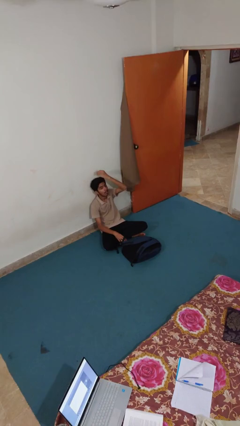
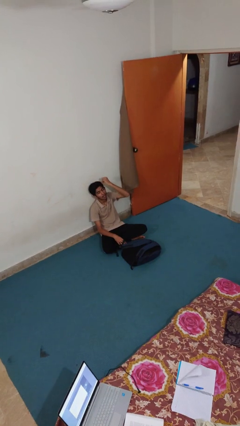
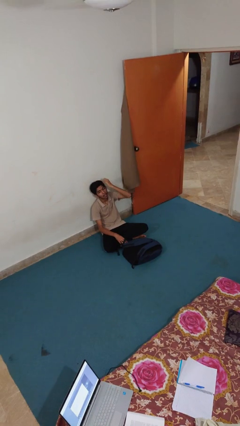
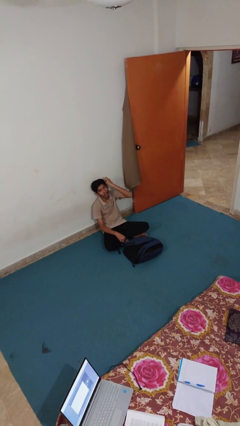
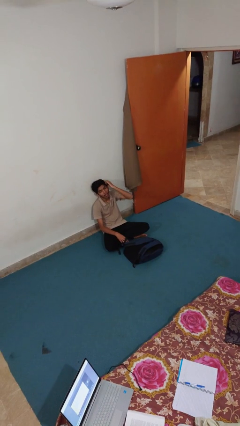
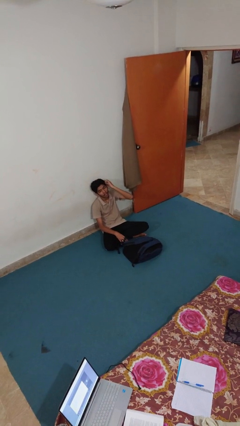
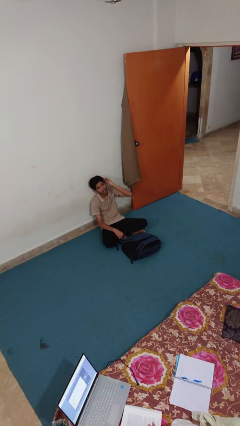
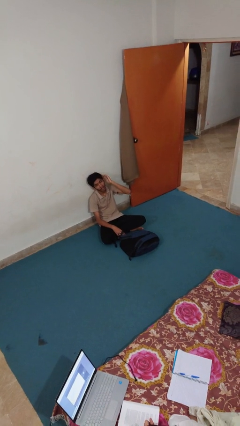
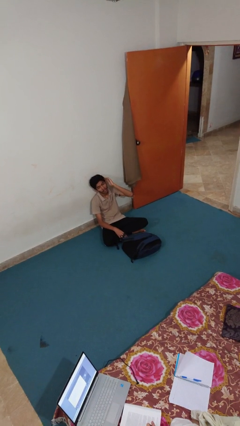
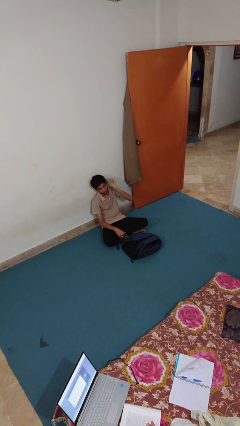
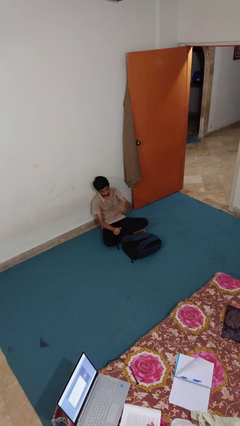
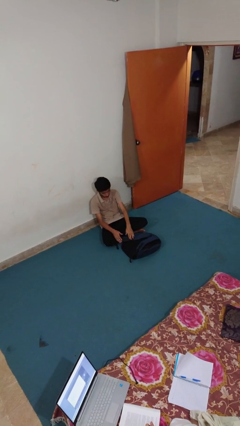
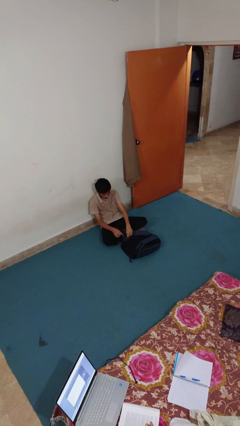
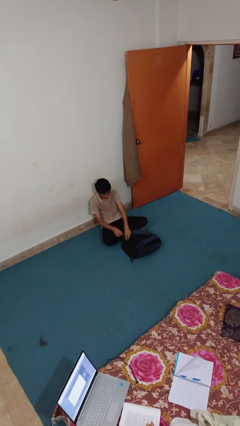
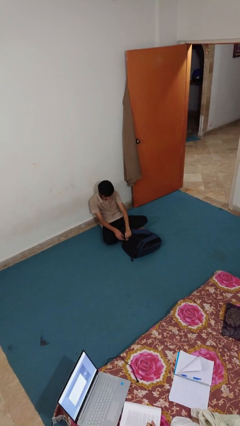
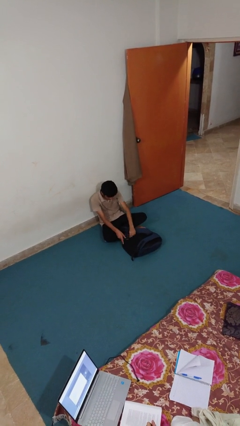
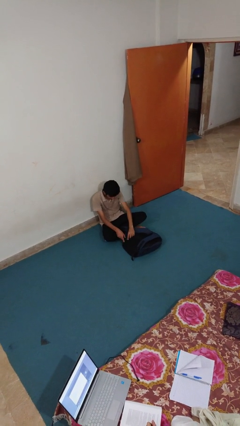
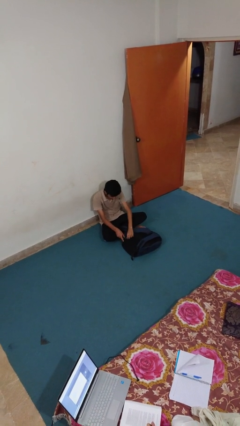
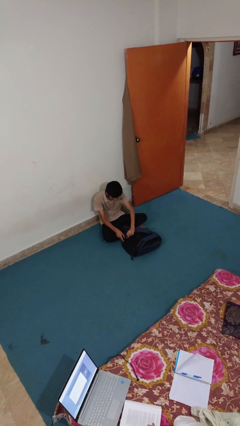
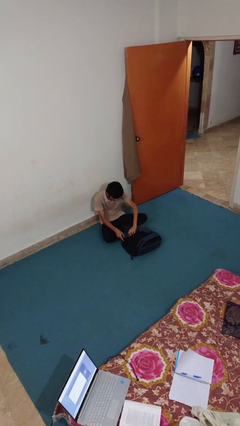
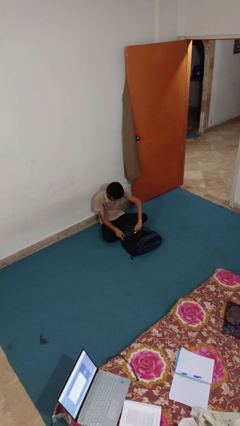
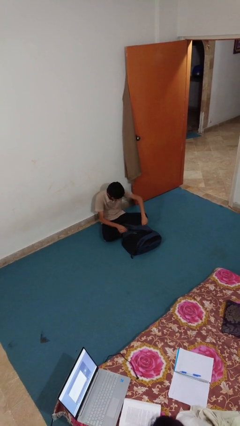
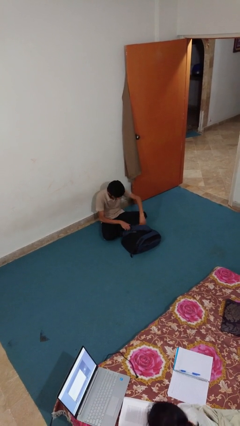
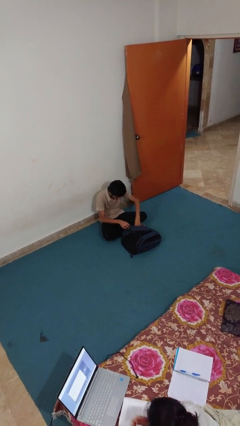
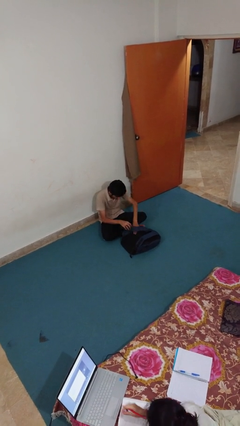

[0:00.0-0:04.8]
person sweeps floor

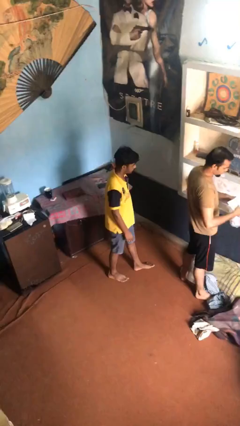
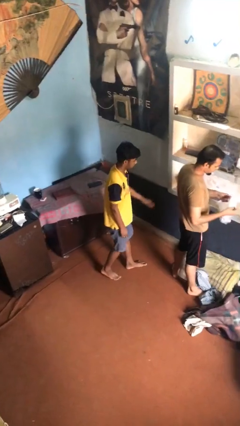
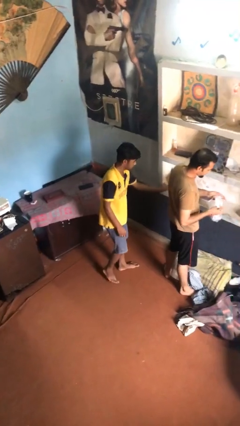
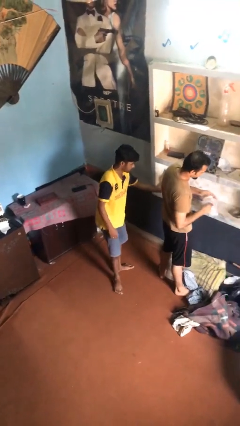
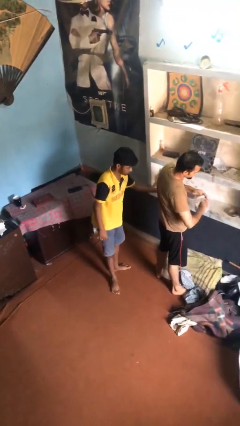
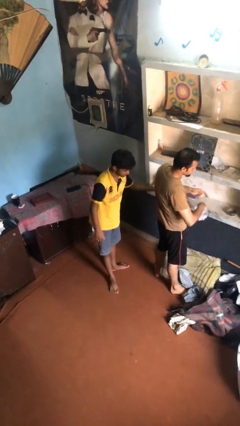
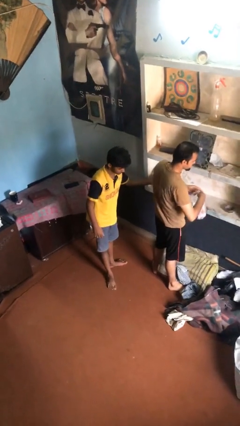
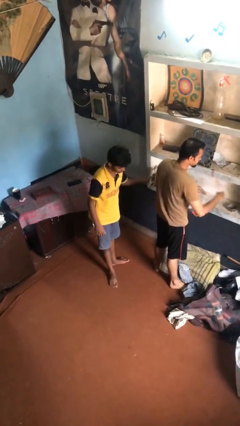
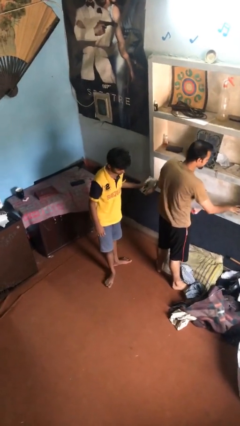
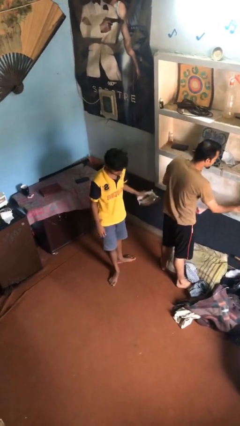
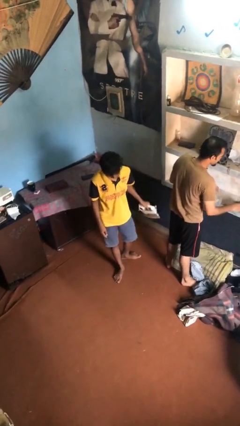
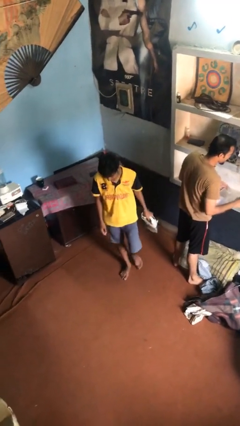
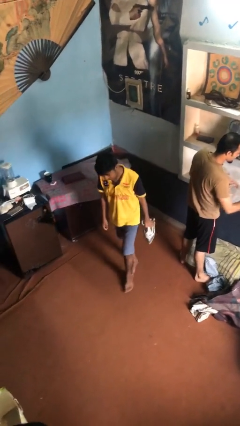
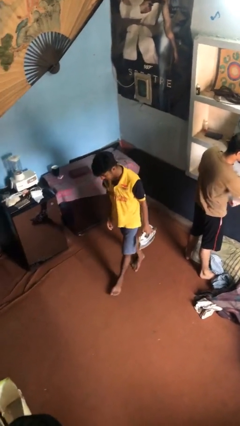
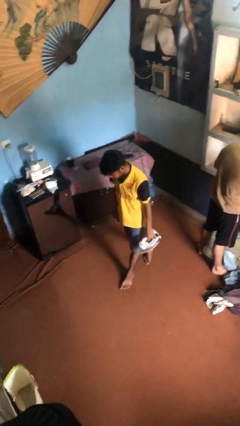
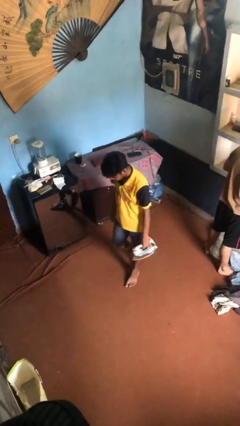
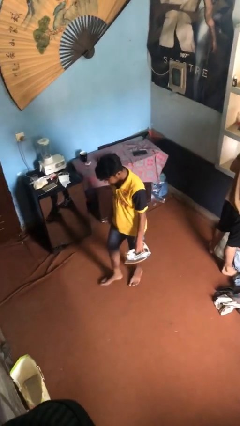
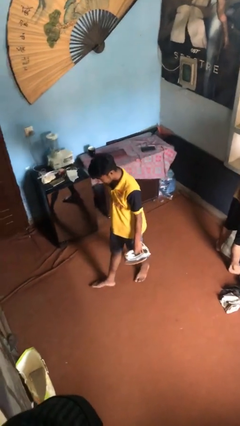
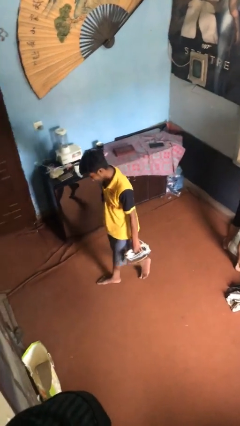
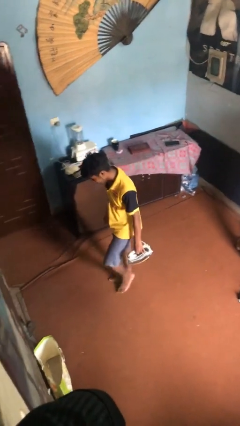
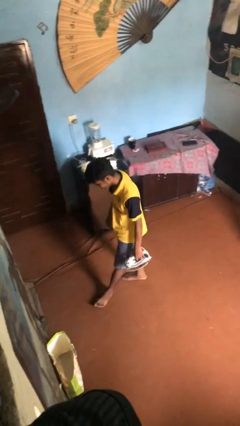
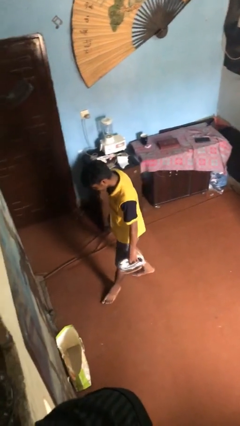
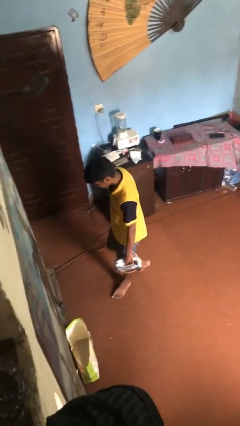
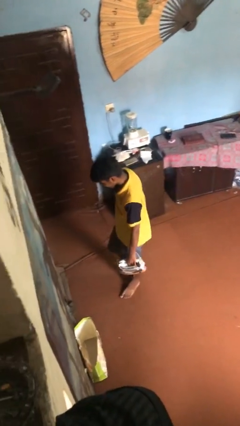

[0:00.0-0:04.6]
person steals object from person

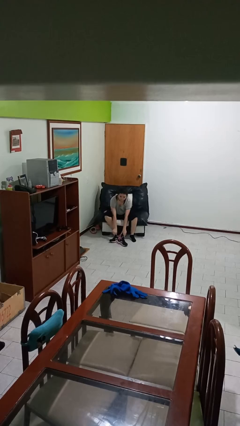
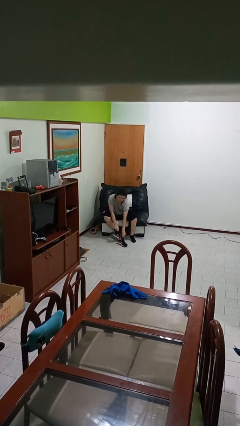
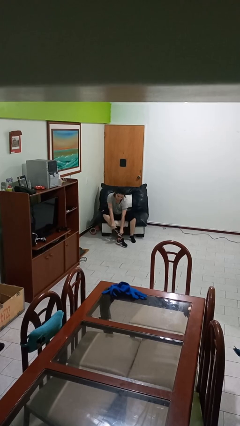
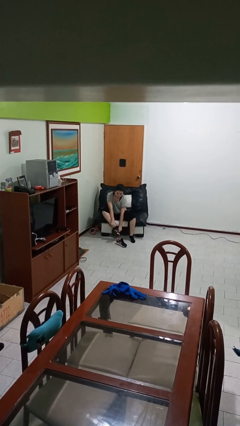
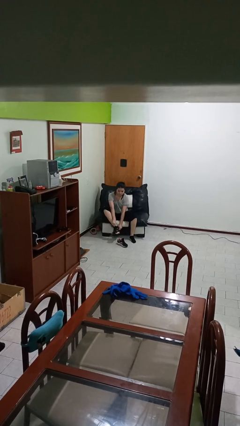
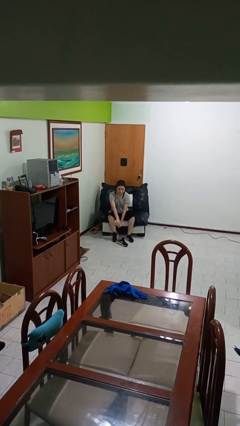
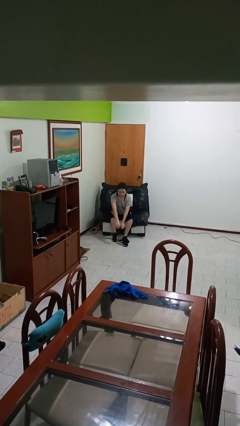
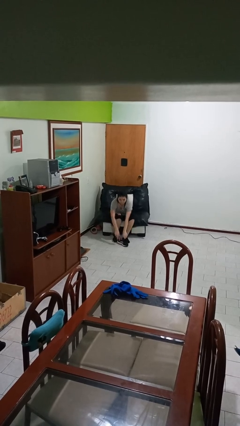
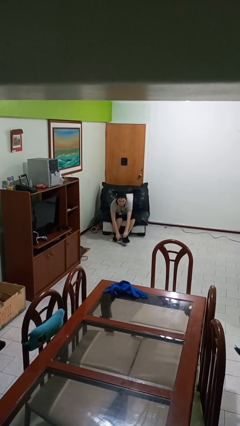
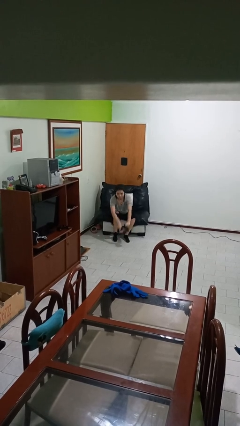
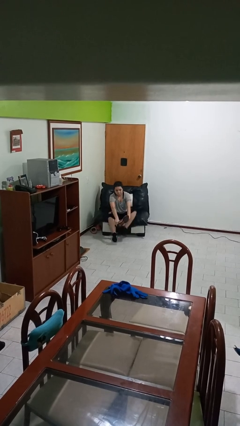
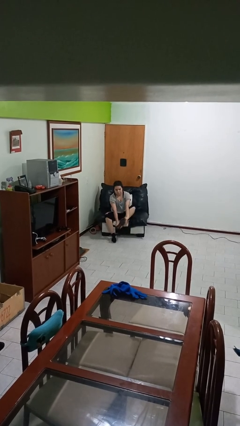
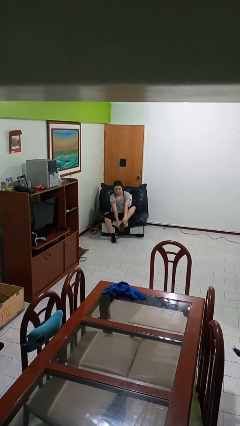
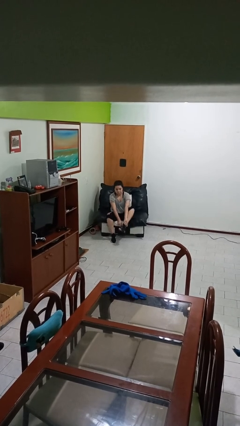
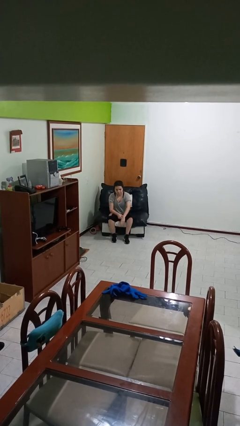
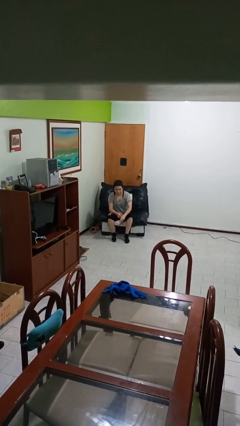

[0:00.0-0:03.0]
person puts on shoes

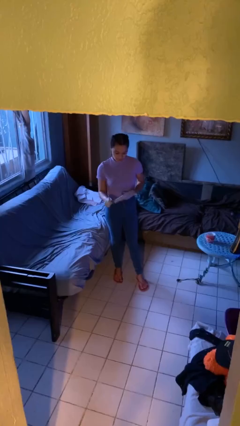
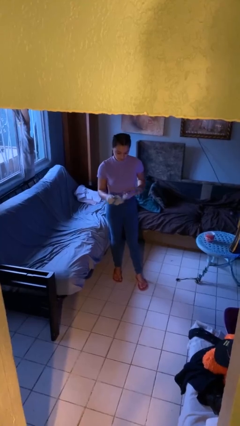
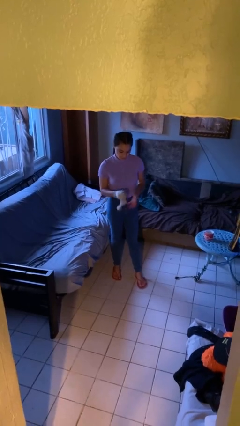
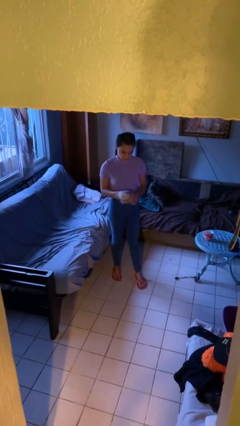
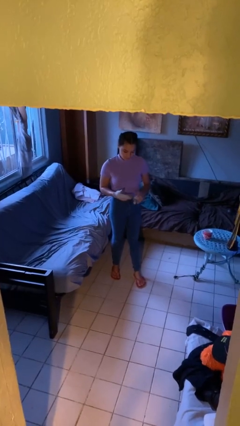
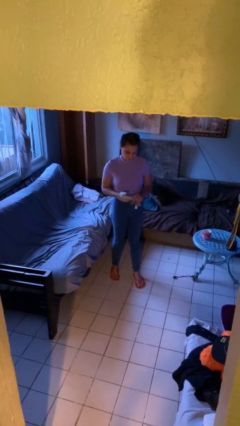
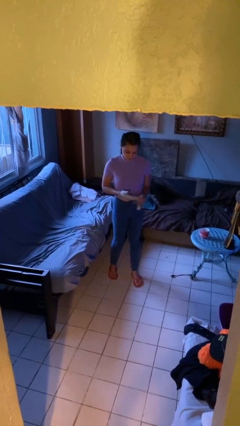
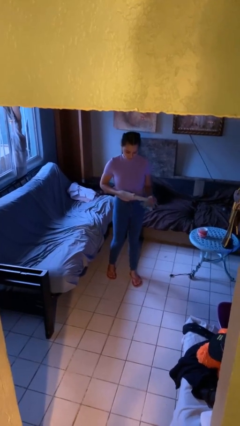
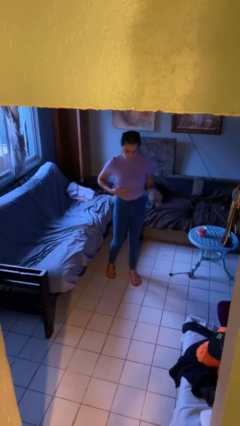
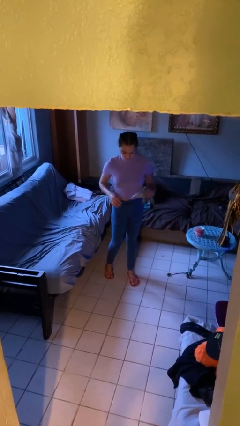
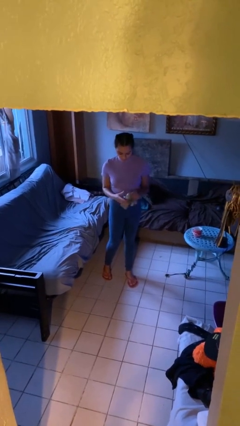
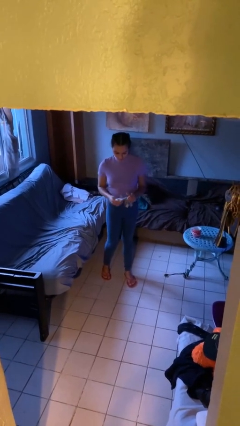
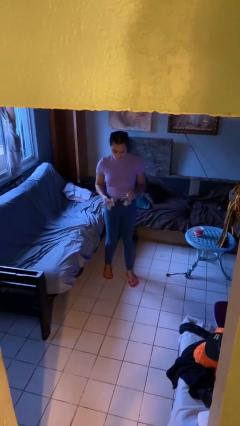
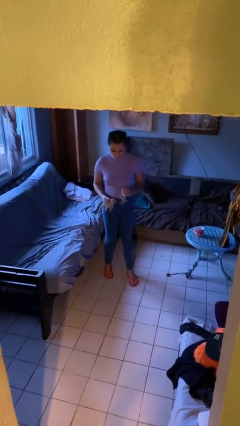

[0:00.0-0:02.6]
person takes off gloves

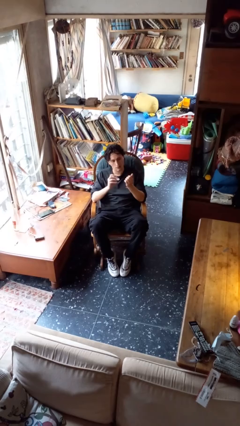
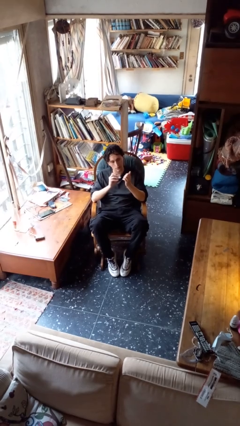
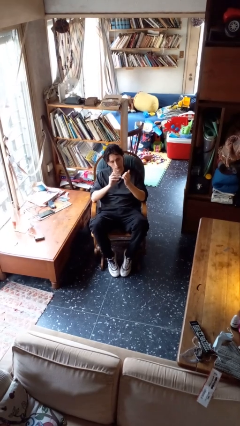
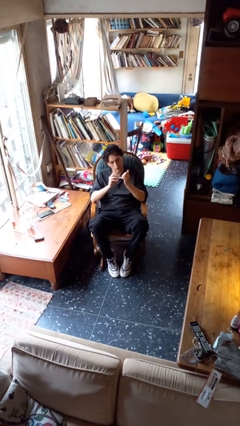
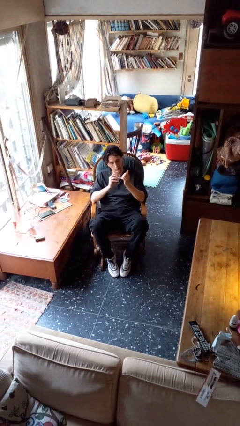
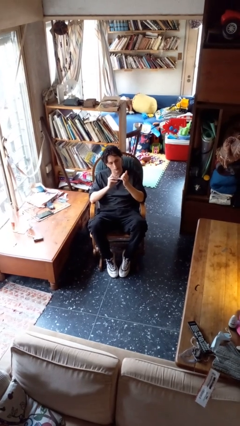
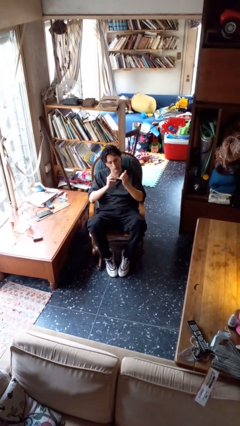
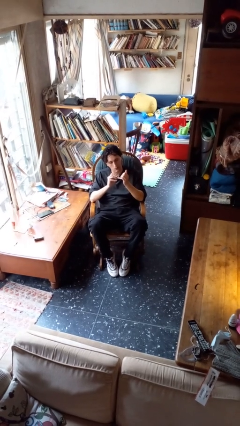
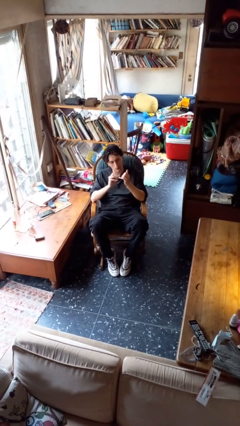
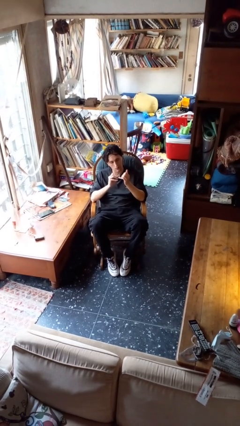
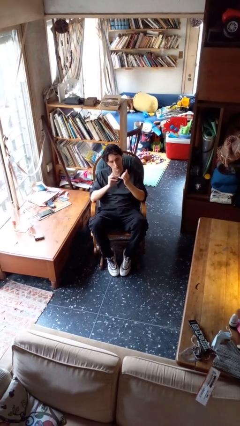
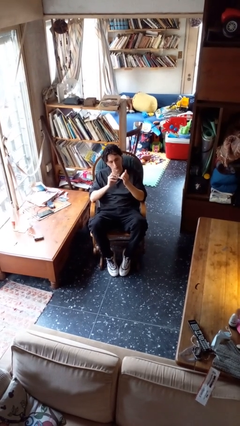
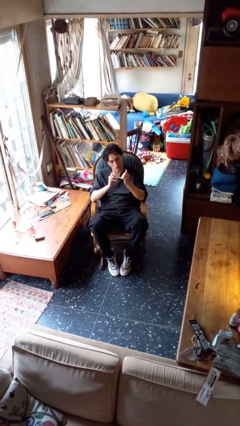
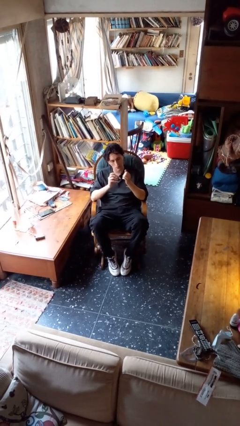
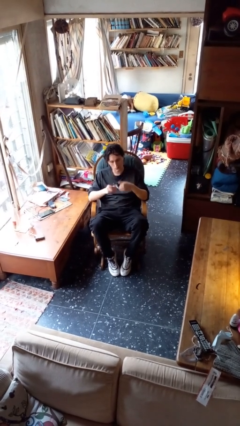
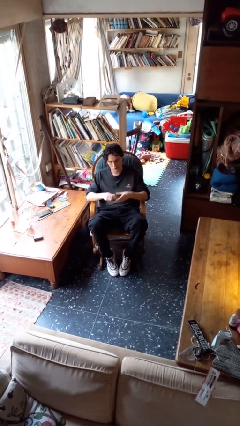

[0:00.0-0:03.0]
person clips fingernails
